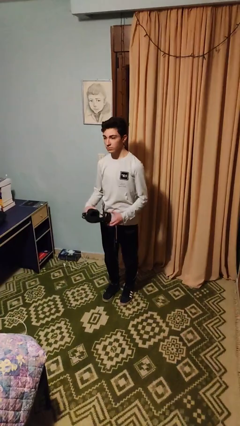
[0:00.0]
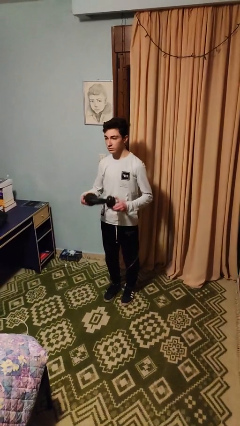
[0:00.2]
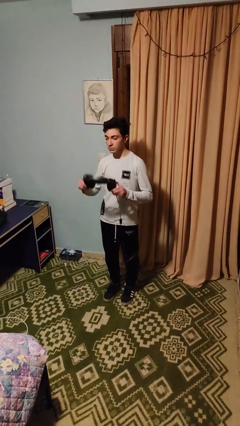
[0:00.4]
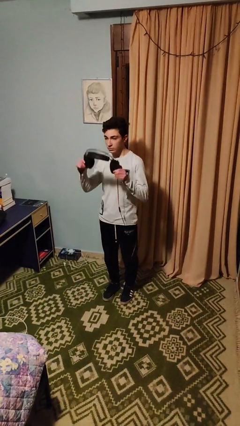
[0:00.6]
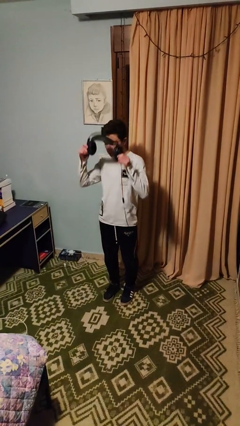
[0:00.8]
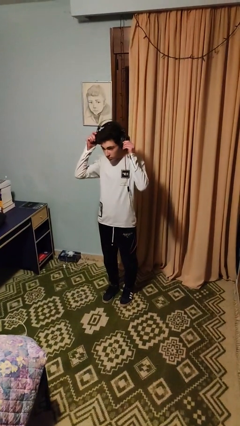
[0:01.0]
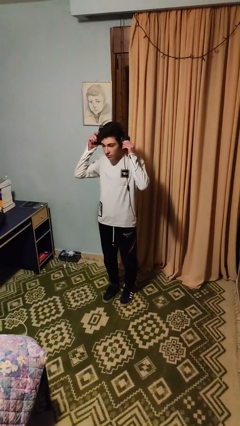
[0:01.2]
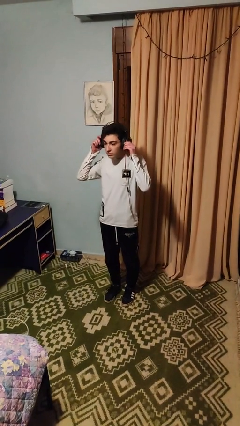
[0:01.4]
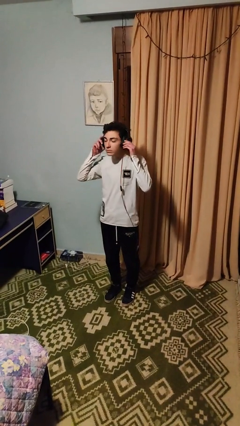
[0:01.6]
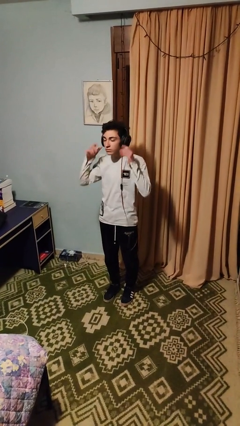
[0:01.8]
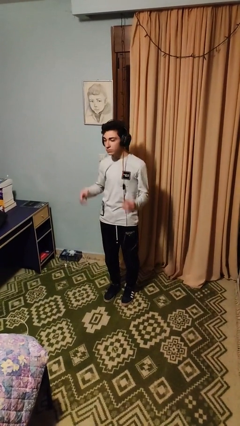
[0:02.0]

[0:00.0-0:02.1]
person puts on headphones

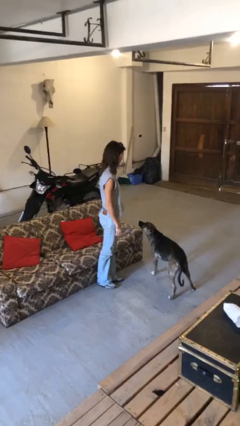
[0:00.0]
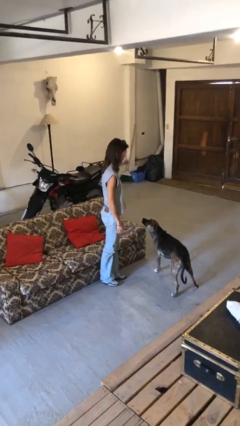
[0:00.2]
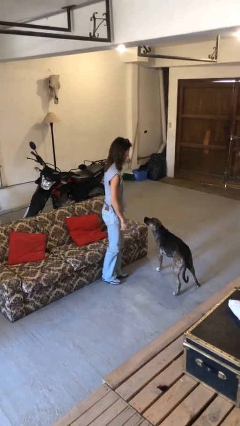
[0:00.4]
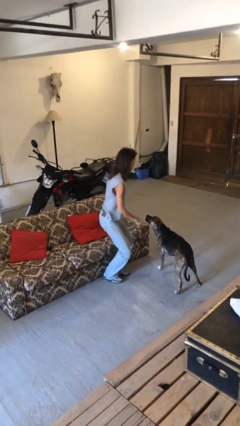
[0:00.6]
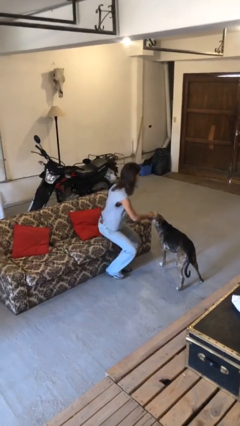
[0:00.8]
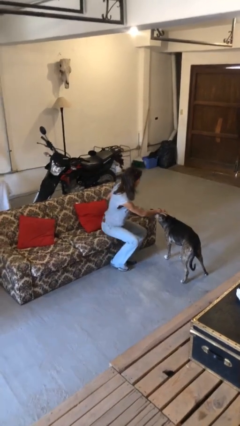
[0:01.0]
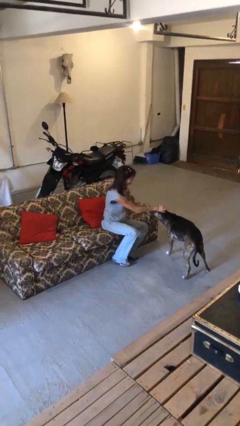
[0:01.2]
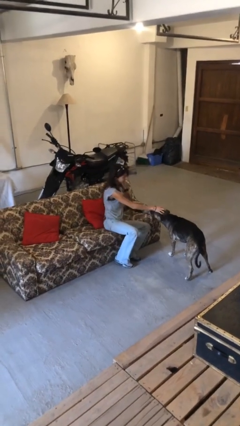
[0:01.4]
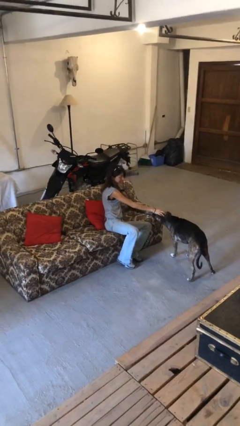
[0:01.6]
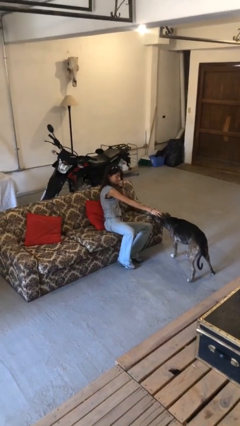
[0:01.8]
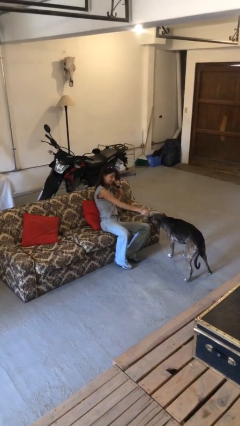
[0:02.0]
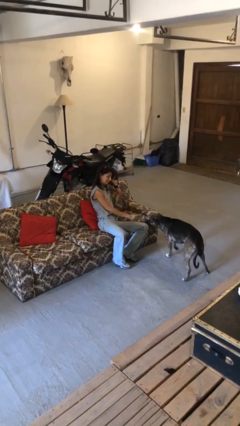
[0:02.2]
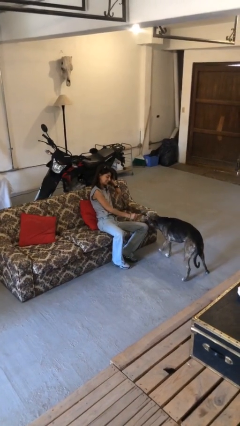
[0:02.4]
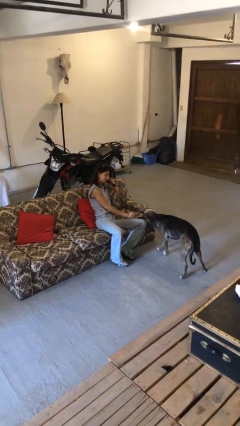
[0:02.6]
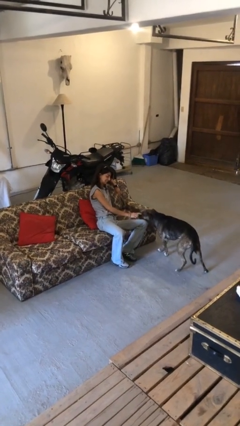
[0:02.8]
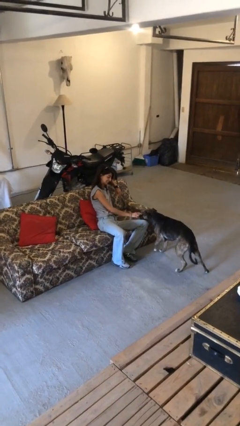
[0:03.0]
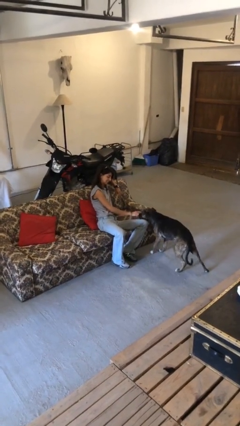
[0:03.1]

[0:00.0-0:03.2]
person lies down on couch

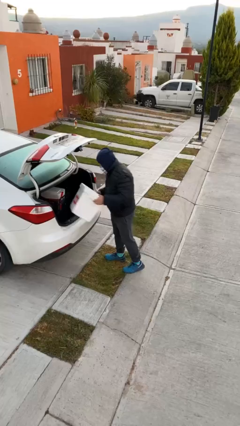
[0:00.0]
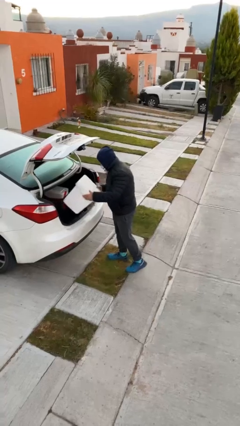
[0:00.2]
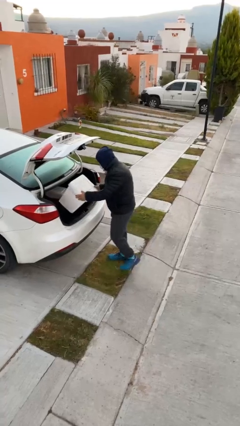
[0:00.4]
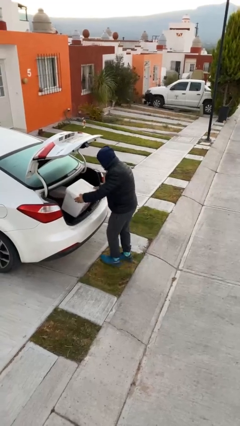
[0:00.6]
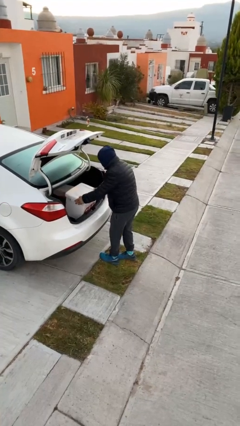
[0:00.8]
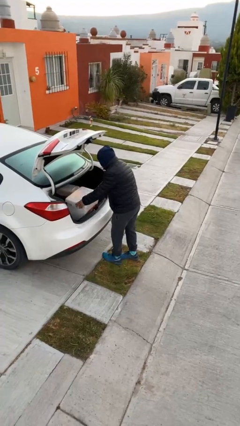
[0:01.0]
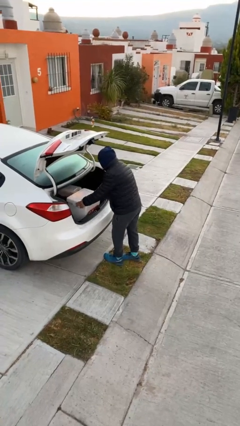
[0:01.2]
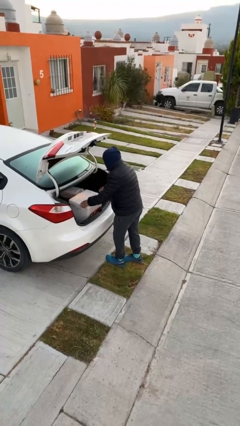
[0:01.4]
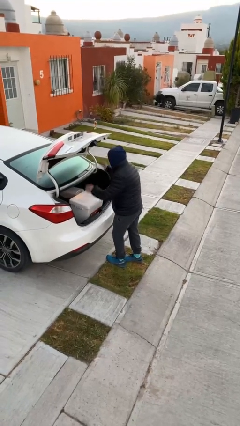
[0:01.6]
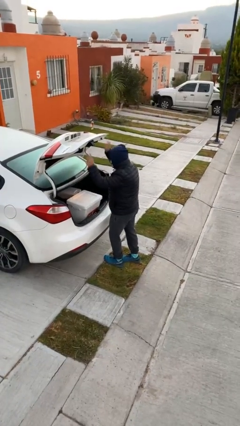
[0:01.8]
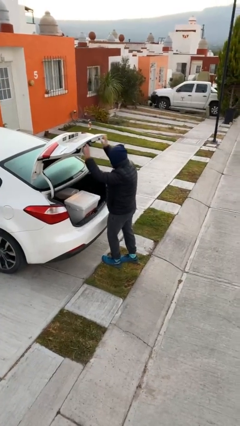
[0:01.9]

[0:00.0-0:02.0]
person loads car

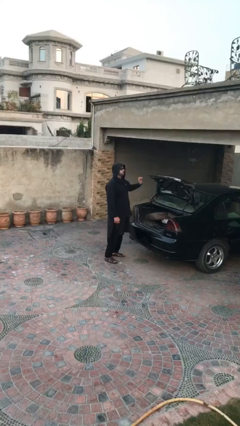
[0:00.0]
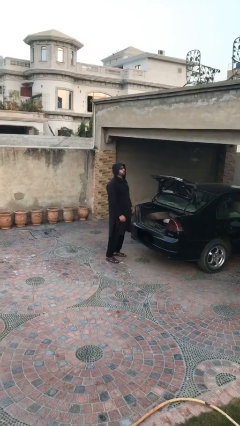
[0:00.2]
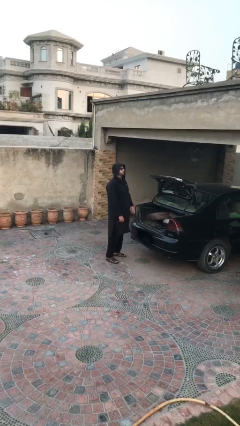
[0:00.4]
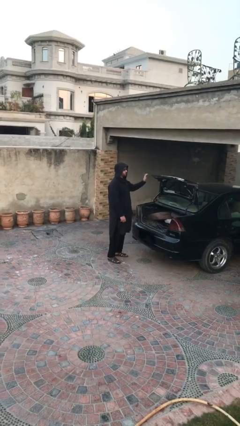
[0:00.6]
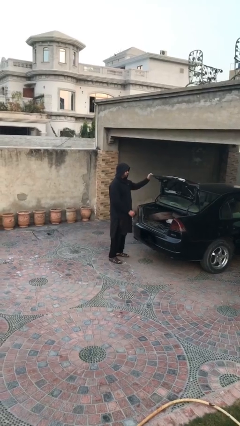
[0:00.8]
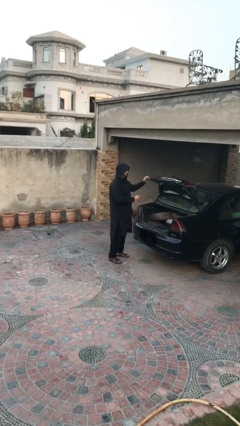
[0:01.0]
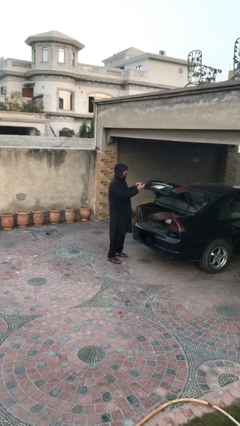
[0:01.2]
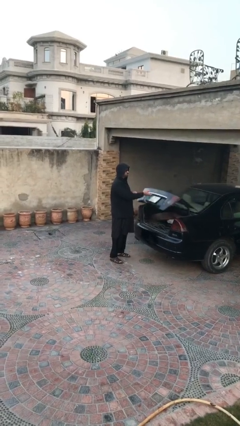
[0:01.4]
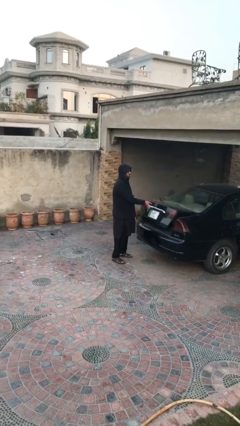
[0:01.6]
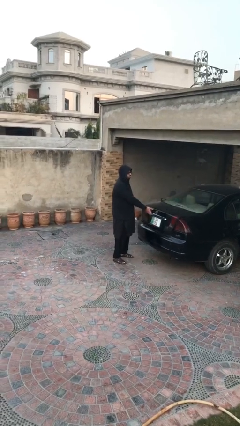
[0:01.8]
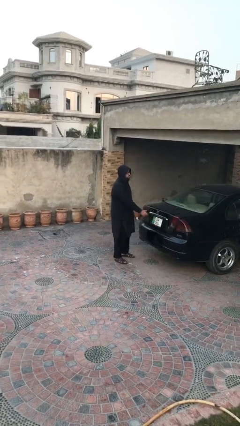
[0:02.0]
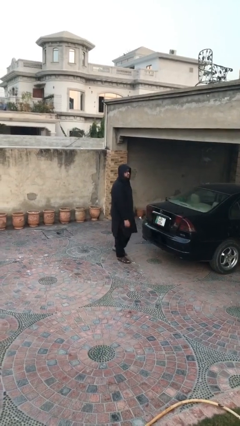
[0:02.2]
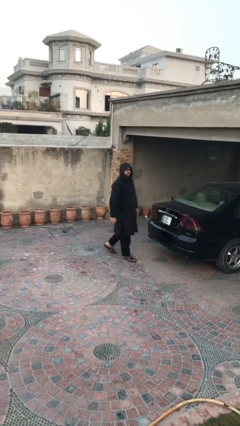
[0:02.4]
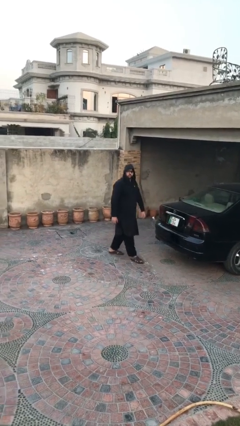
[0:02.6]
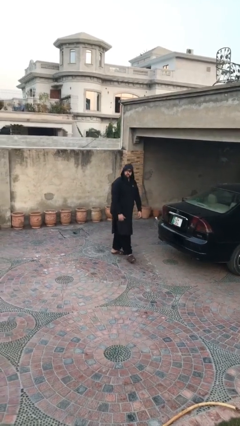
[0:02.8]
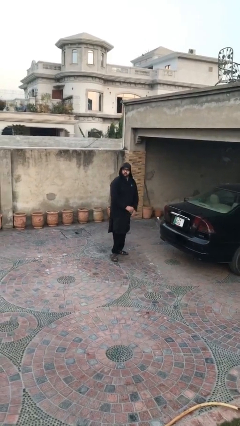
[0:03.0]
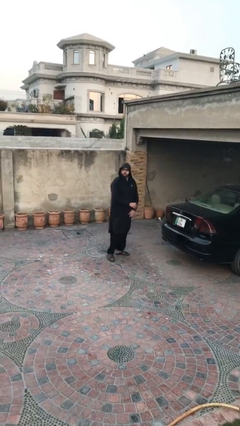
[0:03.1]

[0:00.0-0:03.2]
person closes car trunk

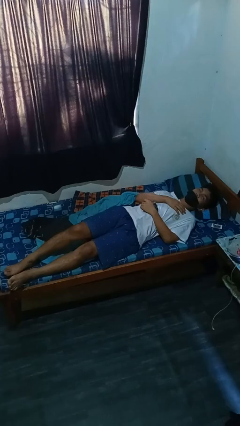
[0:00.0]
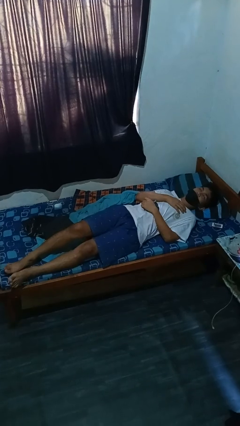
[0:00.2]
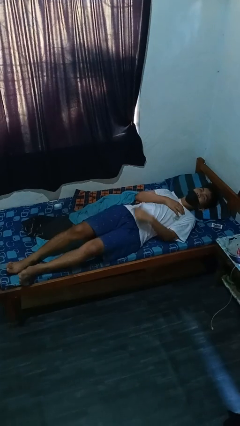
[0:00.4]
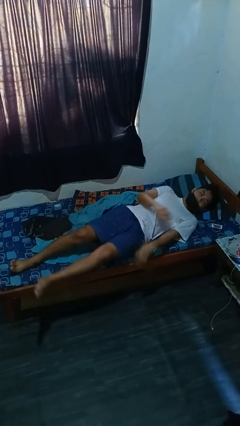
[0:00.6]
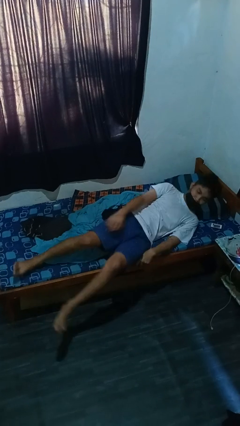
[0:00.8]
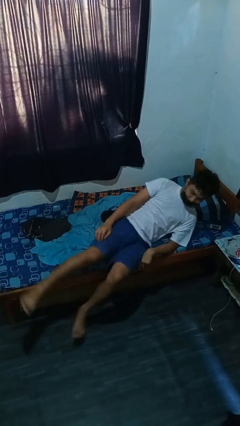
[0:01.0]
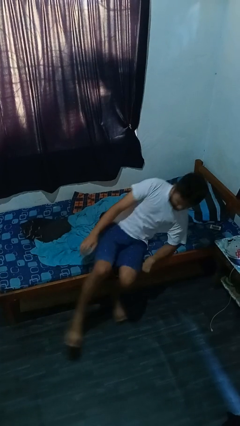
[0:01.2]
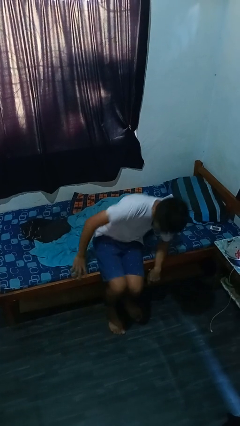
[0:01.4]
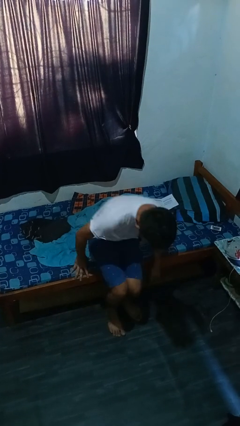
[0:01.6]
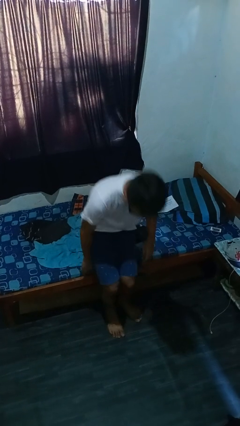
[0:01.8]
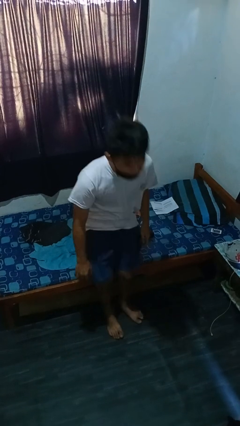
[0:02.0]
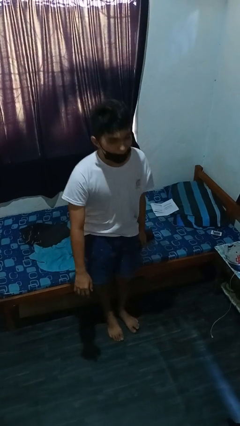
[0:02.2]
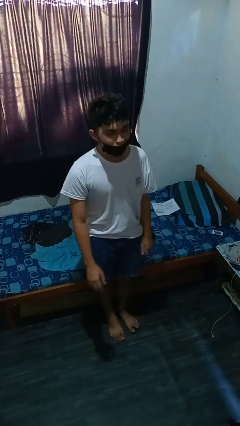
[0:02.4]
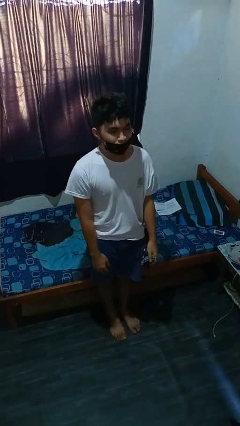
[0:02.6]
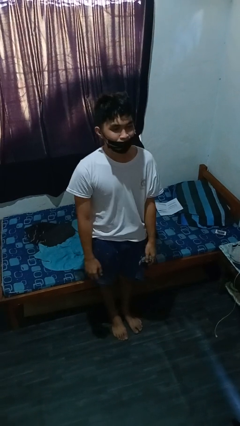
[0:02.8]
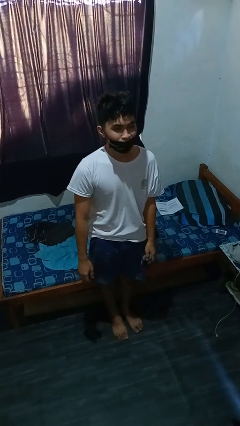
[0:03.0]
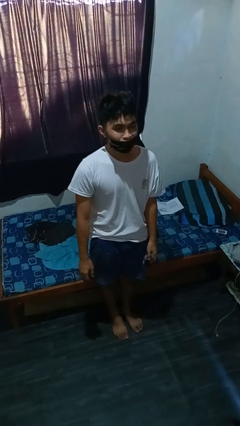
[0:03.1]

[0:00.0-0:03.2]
person stands up

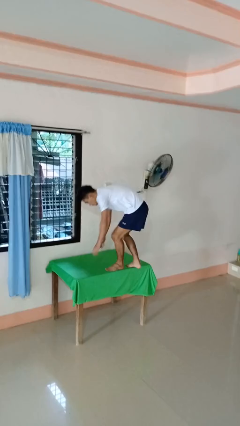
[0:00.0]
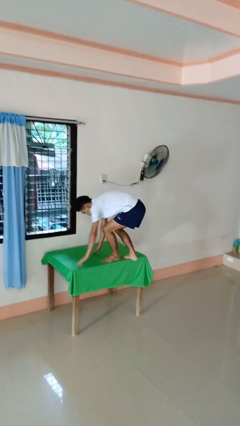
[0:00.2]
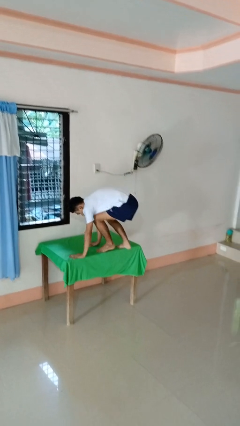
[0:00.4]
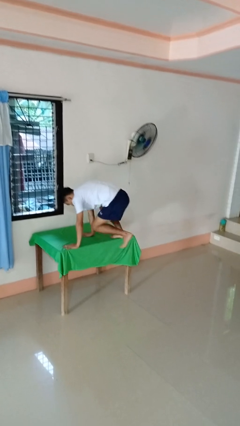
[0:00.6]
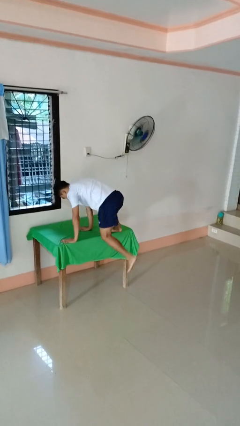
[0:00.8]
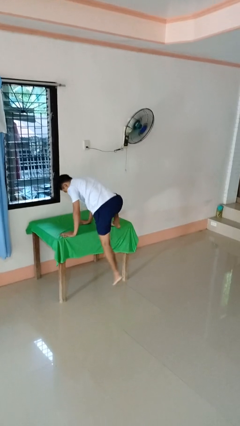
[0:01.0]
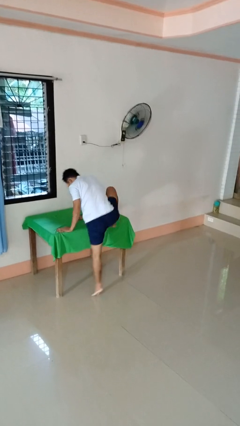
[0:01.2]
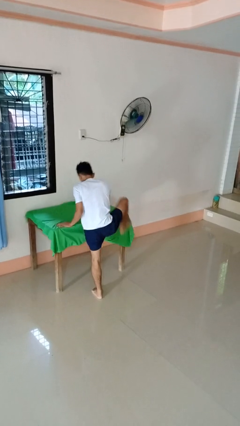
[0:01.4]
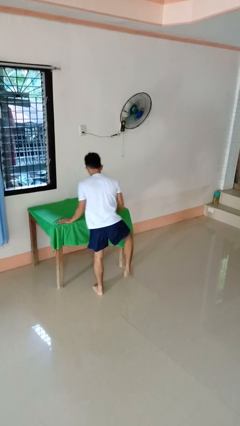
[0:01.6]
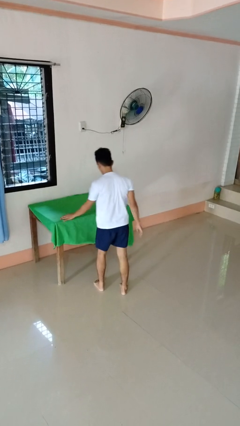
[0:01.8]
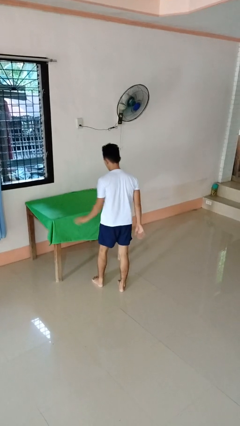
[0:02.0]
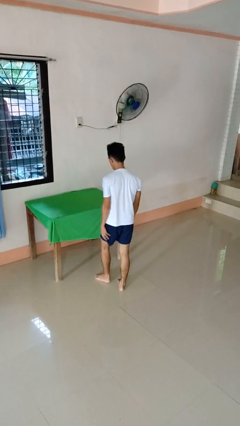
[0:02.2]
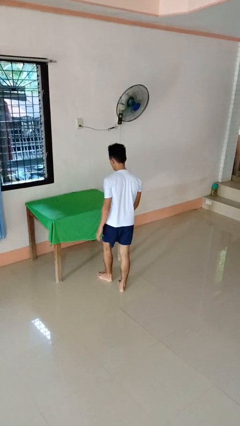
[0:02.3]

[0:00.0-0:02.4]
person climbs off table

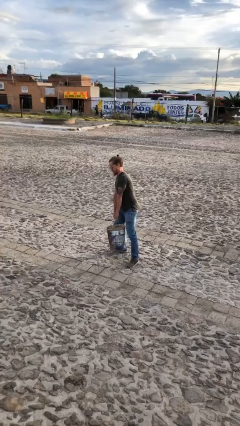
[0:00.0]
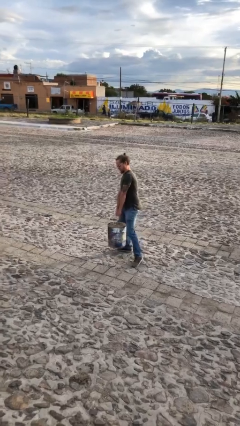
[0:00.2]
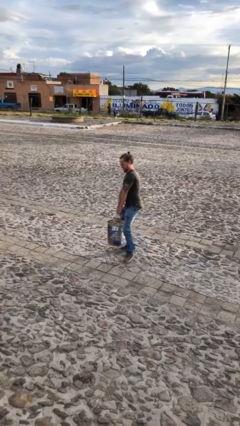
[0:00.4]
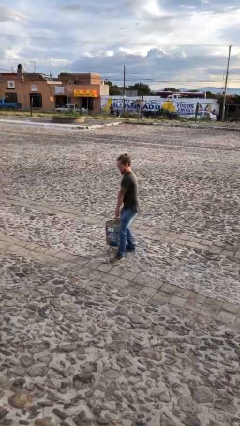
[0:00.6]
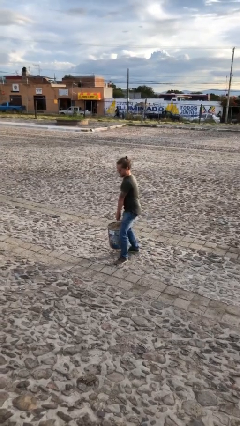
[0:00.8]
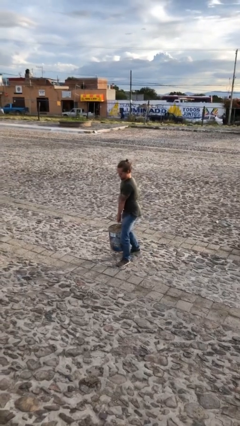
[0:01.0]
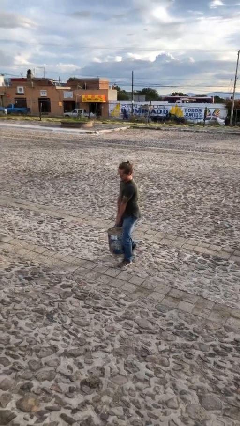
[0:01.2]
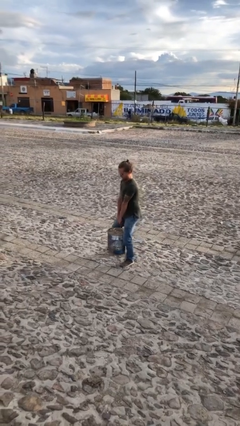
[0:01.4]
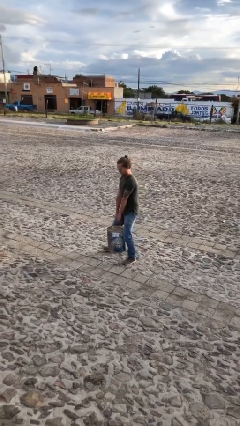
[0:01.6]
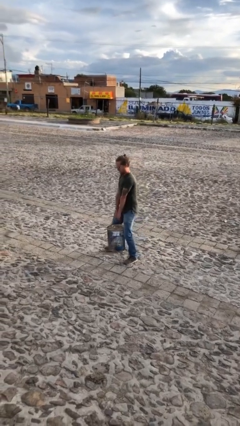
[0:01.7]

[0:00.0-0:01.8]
person carries heavy object
